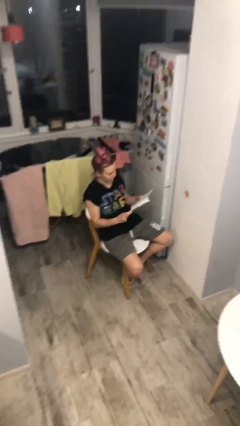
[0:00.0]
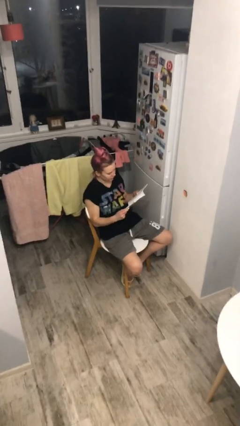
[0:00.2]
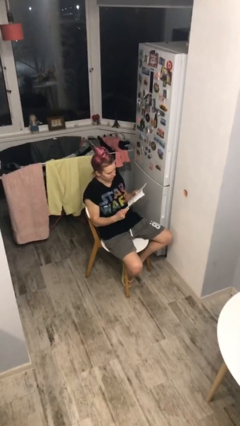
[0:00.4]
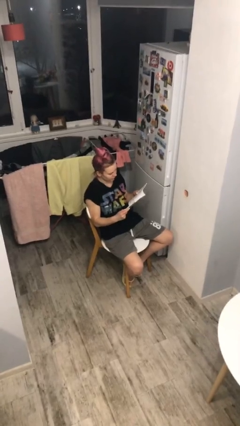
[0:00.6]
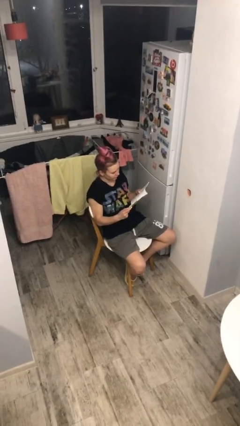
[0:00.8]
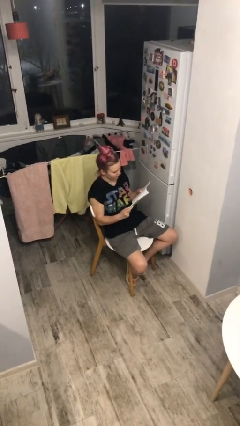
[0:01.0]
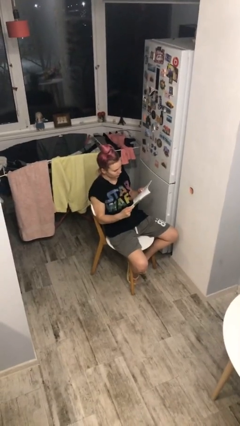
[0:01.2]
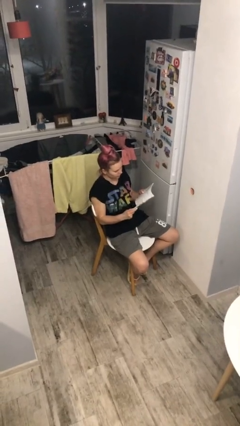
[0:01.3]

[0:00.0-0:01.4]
person reads document

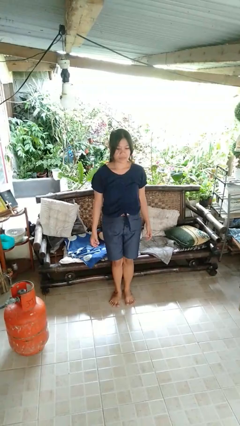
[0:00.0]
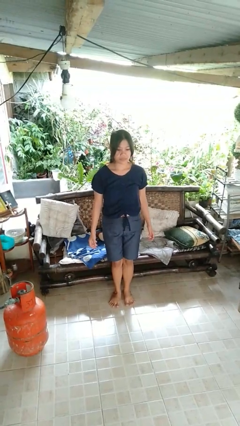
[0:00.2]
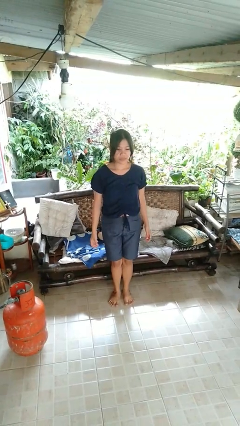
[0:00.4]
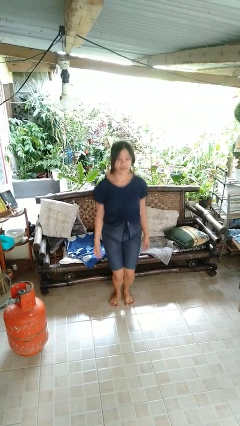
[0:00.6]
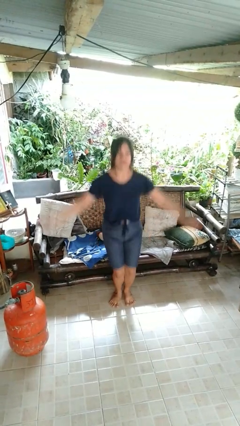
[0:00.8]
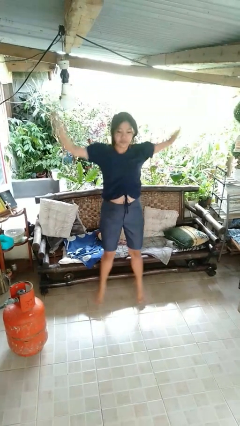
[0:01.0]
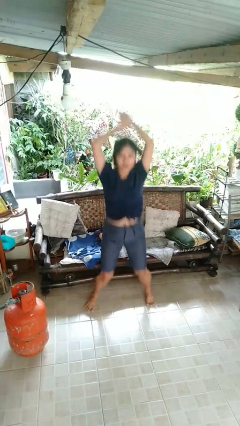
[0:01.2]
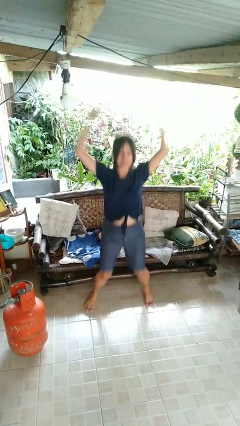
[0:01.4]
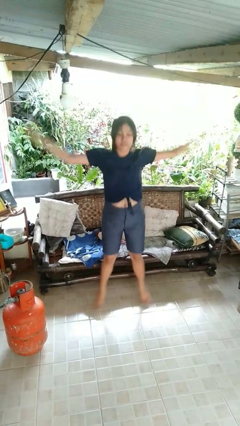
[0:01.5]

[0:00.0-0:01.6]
person exercises with jumping jacks

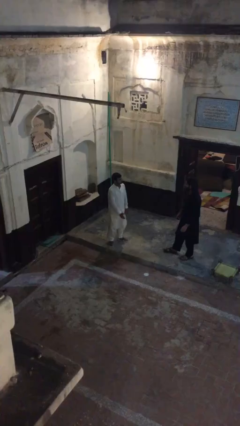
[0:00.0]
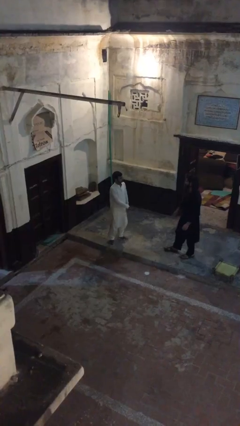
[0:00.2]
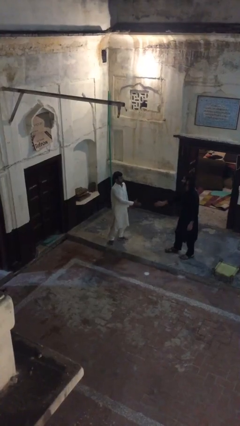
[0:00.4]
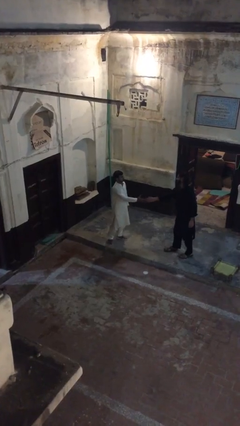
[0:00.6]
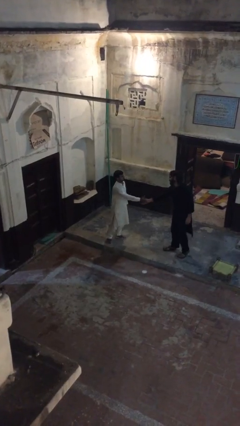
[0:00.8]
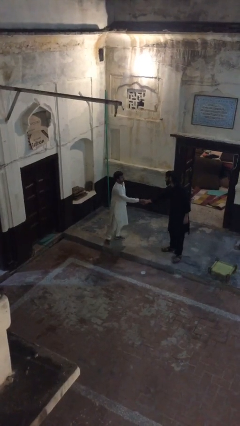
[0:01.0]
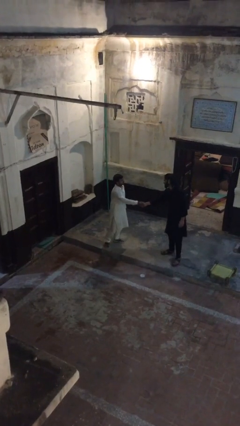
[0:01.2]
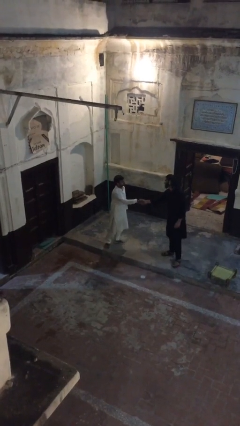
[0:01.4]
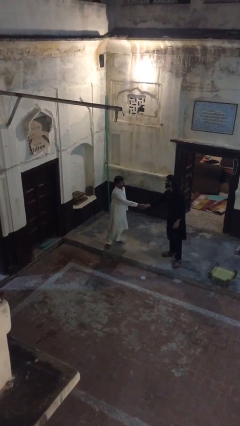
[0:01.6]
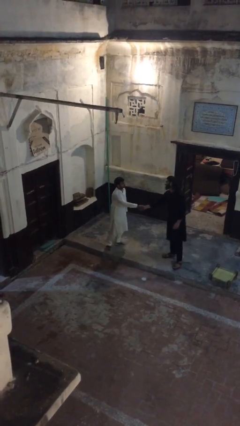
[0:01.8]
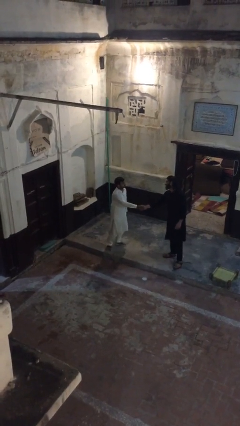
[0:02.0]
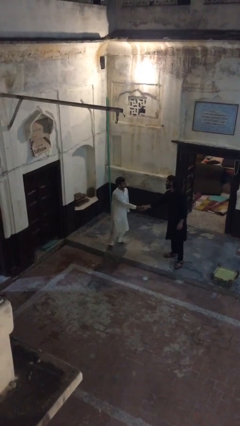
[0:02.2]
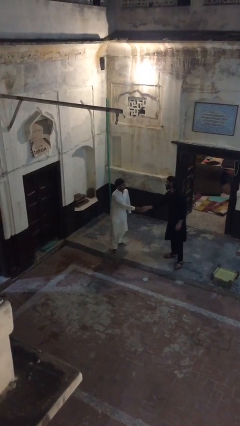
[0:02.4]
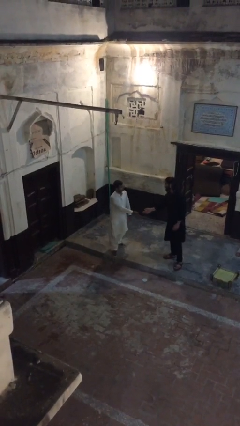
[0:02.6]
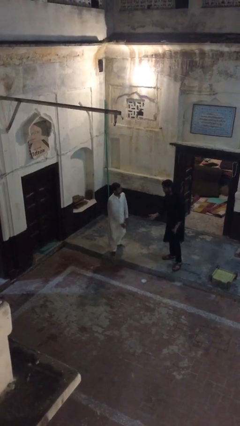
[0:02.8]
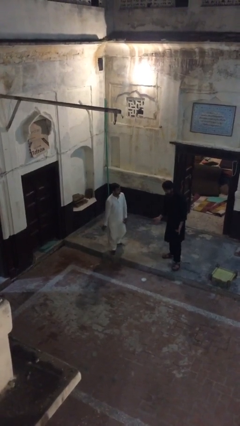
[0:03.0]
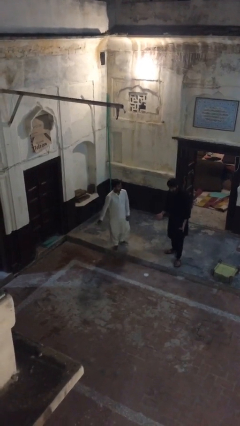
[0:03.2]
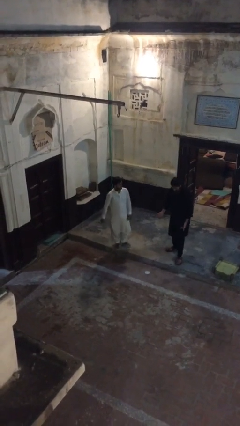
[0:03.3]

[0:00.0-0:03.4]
person shakes hand

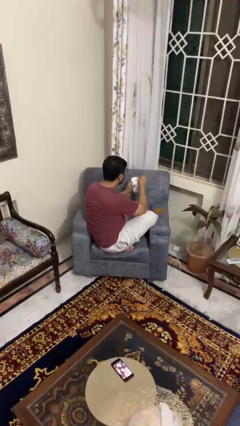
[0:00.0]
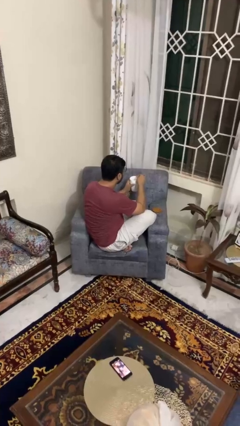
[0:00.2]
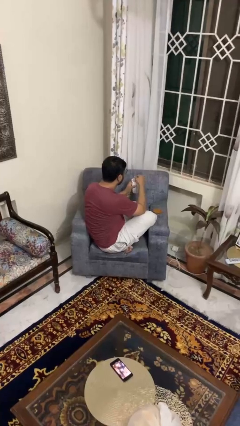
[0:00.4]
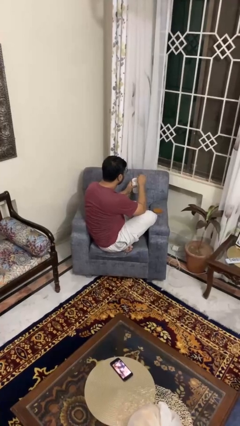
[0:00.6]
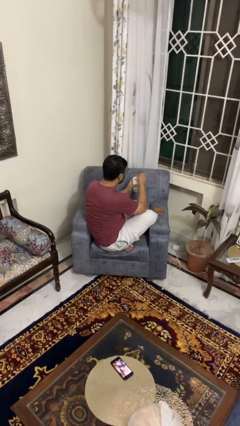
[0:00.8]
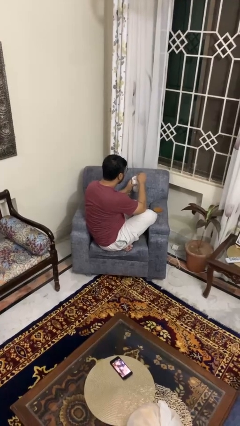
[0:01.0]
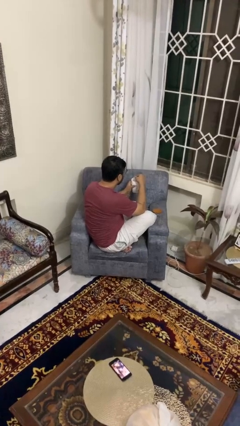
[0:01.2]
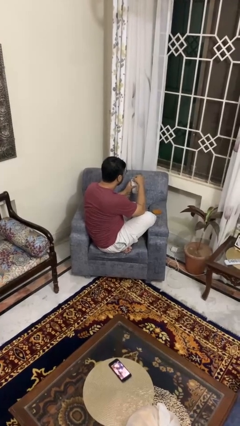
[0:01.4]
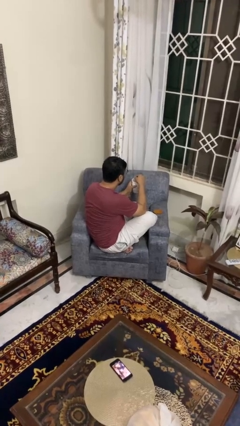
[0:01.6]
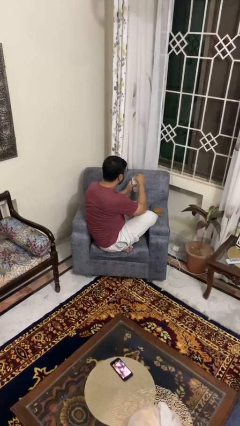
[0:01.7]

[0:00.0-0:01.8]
person stirs mug

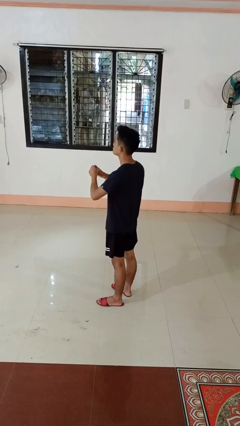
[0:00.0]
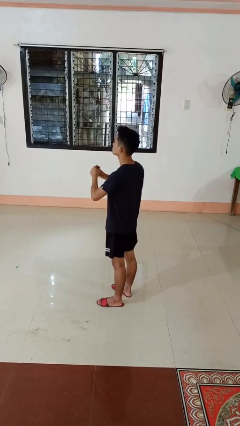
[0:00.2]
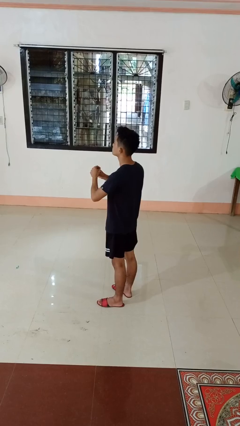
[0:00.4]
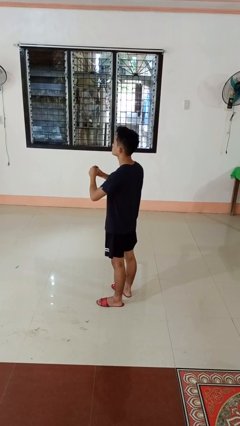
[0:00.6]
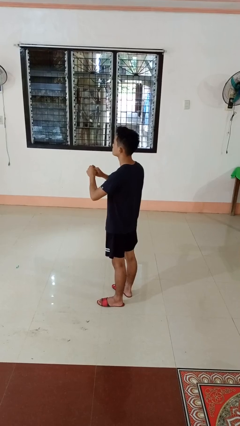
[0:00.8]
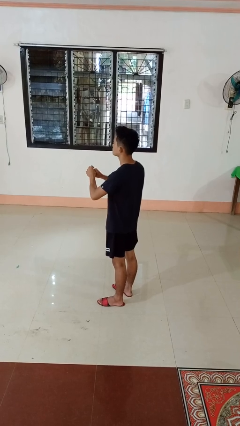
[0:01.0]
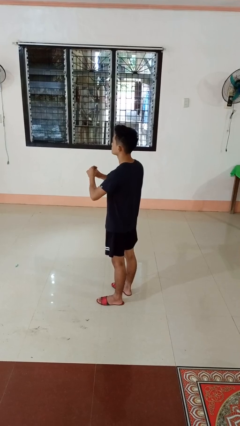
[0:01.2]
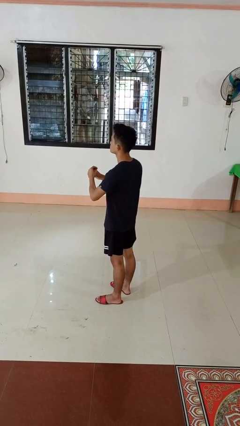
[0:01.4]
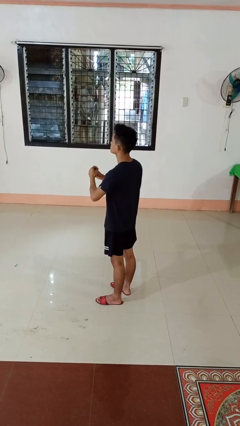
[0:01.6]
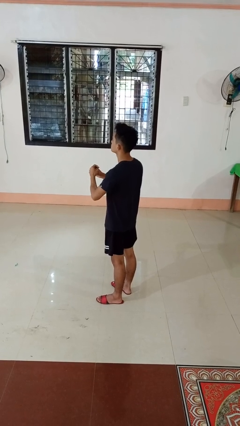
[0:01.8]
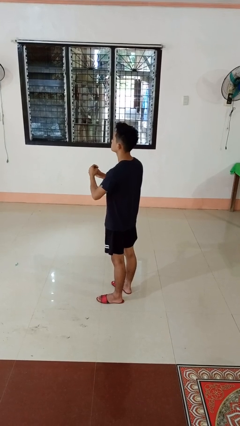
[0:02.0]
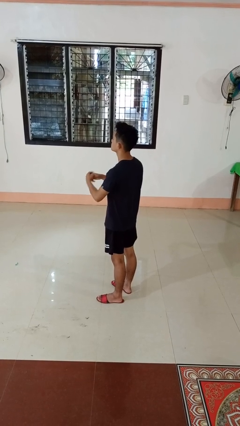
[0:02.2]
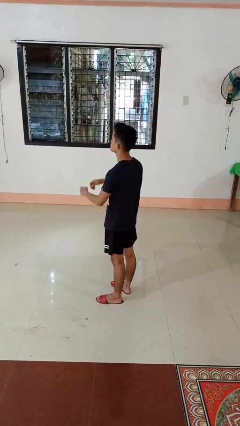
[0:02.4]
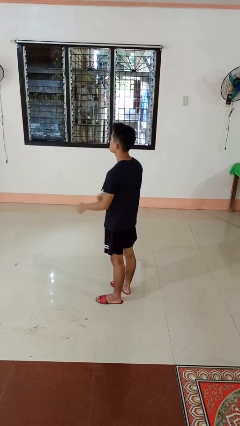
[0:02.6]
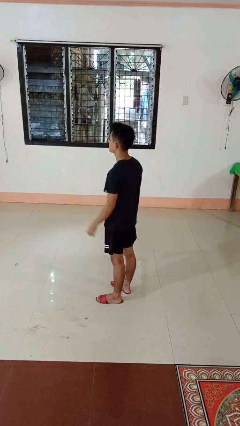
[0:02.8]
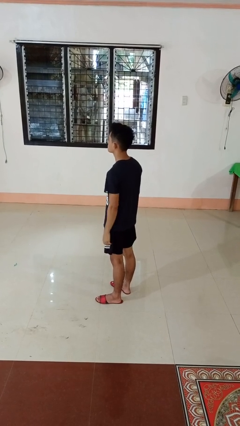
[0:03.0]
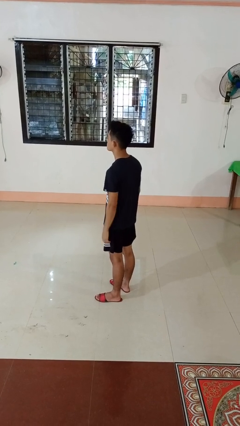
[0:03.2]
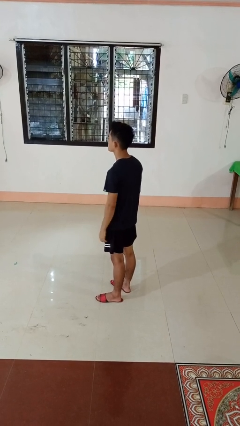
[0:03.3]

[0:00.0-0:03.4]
person cracks knuckles

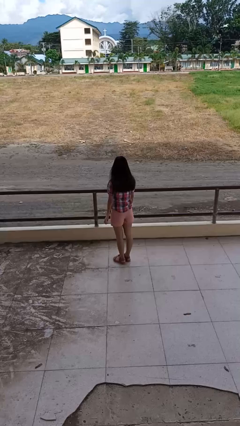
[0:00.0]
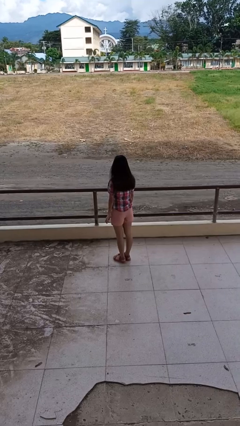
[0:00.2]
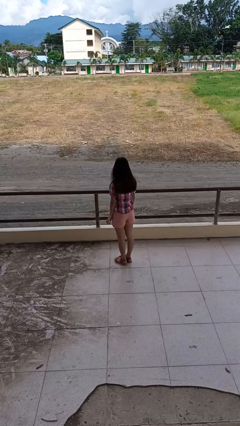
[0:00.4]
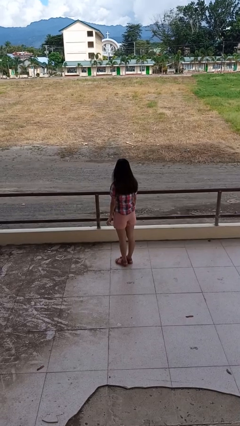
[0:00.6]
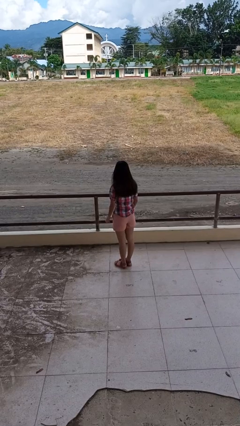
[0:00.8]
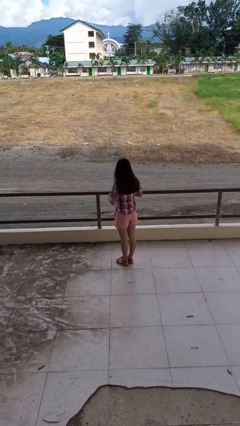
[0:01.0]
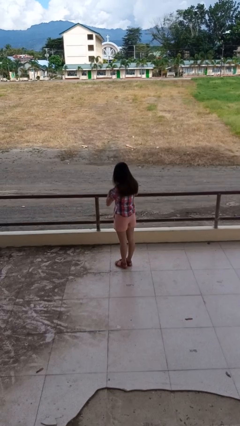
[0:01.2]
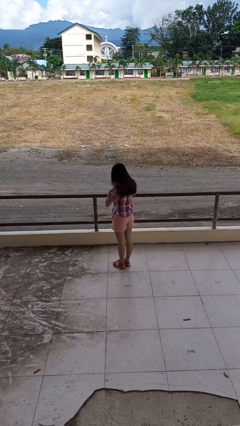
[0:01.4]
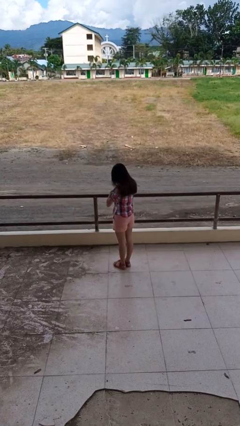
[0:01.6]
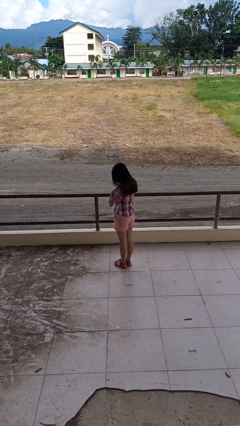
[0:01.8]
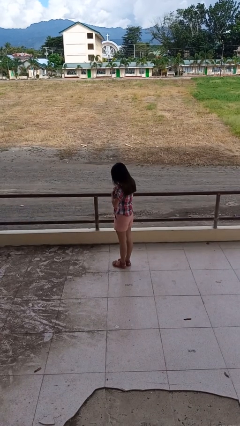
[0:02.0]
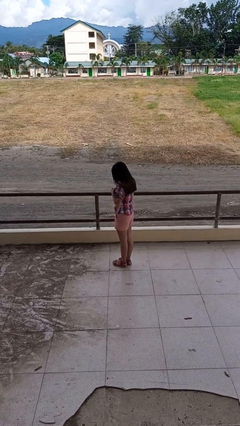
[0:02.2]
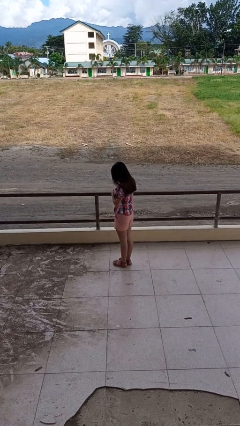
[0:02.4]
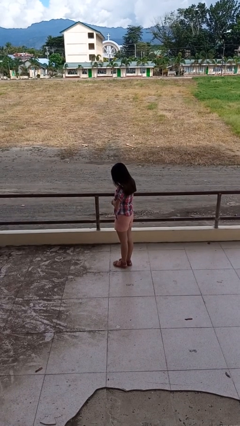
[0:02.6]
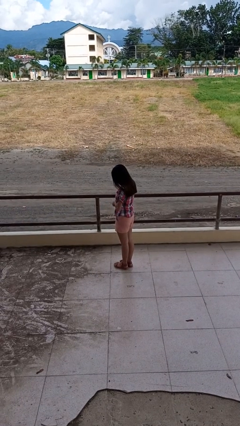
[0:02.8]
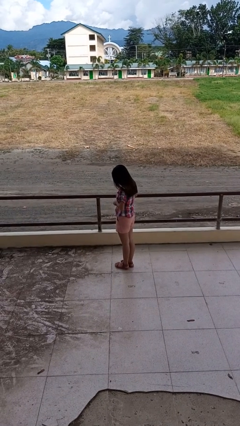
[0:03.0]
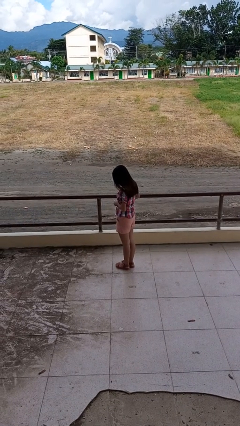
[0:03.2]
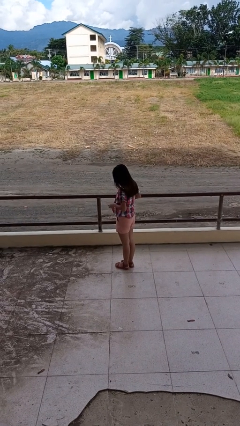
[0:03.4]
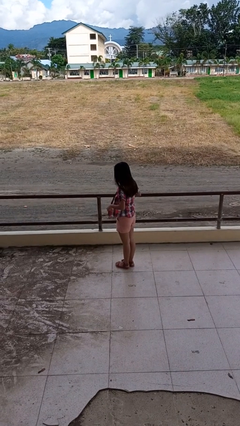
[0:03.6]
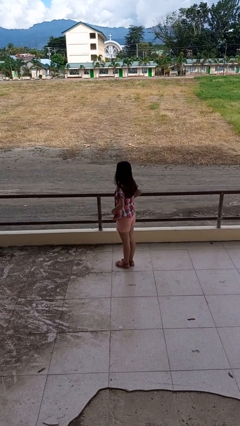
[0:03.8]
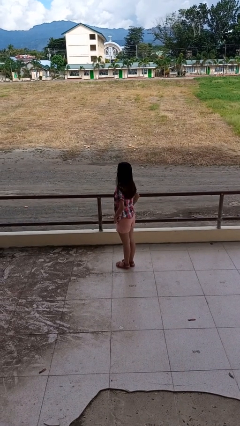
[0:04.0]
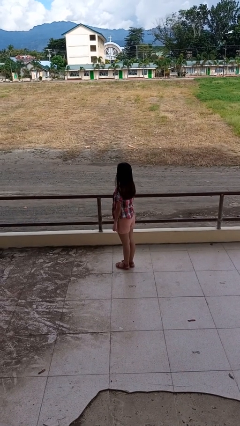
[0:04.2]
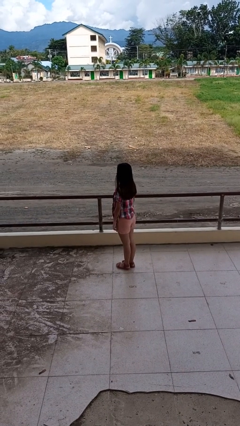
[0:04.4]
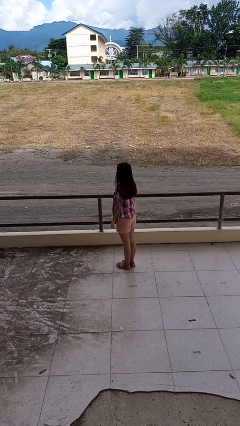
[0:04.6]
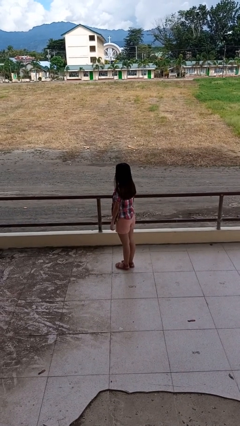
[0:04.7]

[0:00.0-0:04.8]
person unbuttons shirt

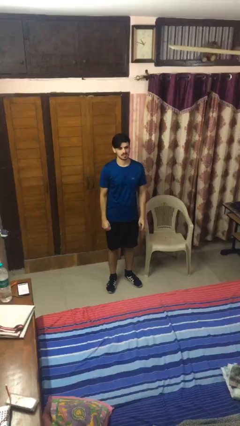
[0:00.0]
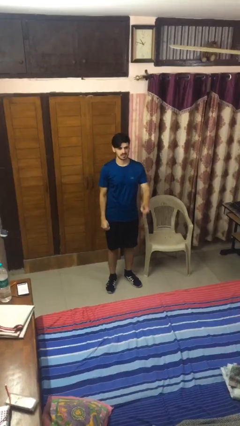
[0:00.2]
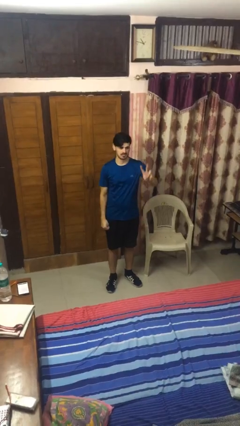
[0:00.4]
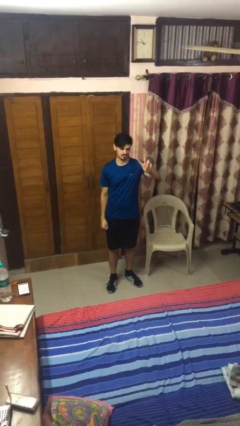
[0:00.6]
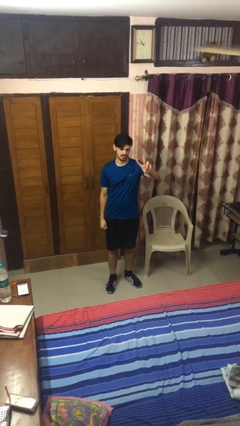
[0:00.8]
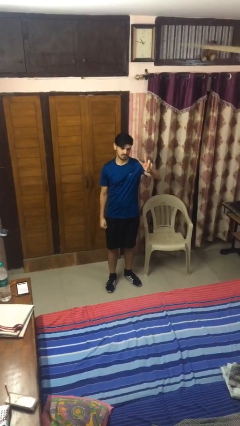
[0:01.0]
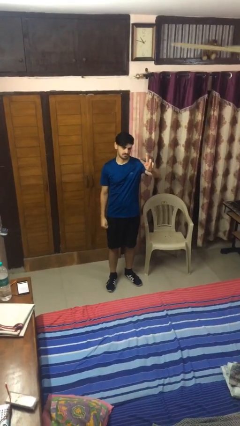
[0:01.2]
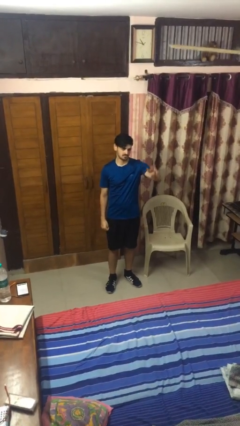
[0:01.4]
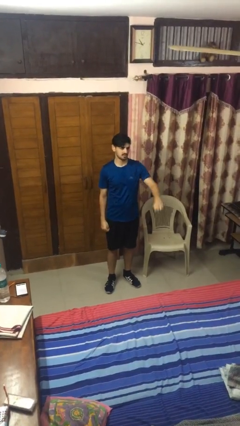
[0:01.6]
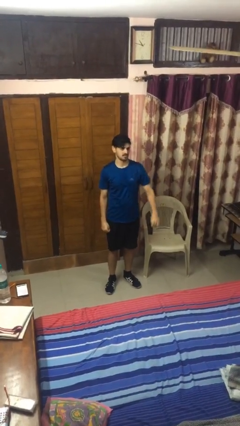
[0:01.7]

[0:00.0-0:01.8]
person gestures peace
